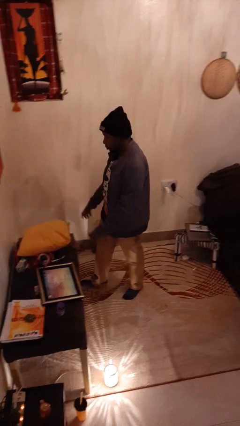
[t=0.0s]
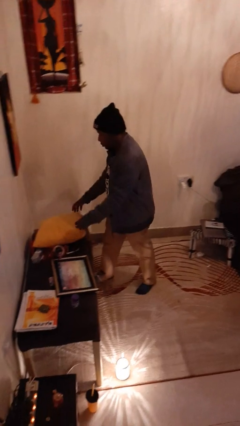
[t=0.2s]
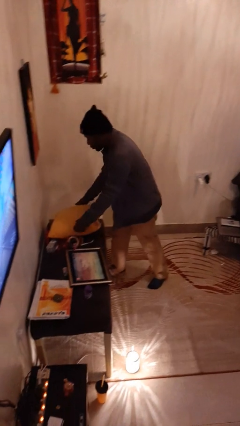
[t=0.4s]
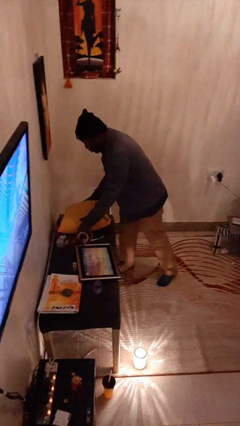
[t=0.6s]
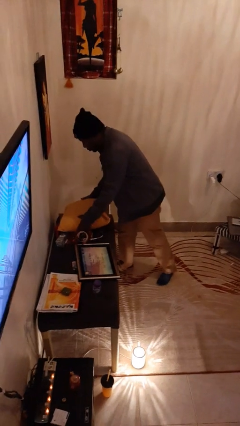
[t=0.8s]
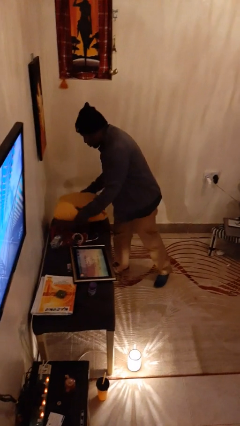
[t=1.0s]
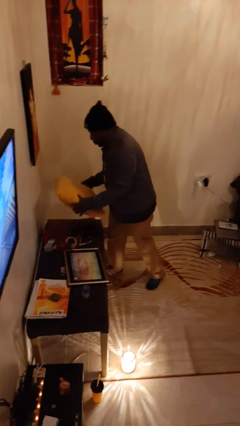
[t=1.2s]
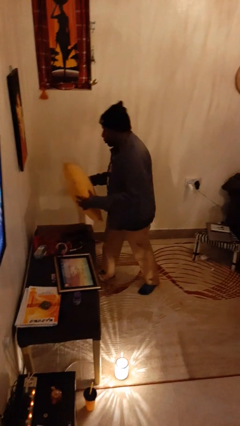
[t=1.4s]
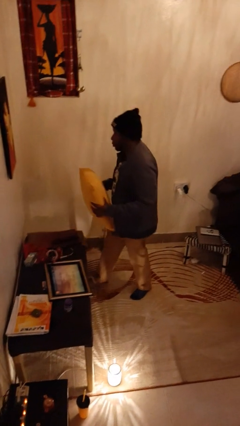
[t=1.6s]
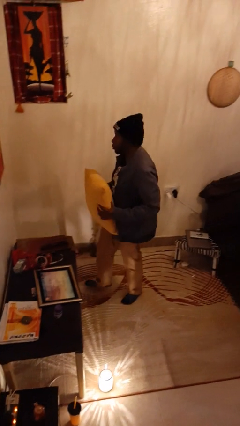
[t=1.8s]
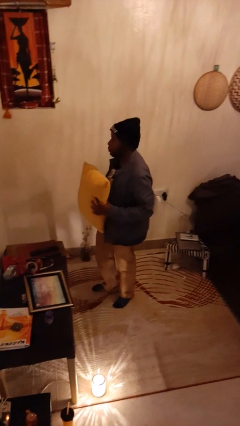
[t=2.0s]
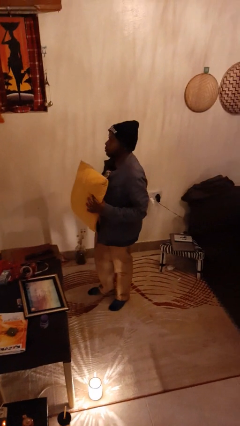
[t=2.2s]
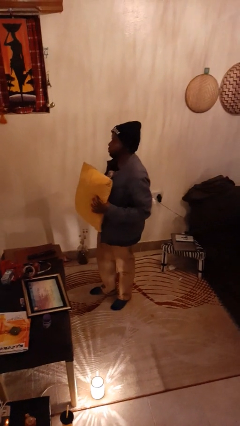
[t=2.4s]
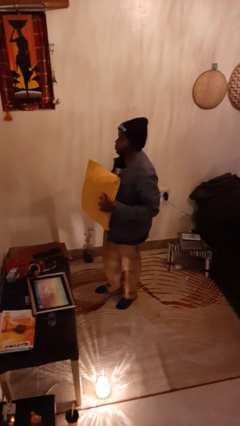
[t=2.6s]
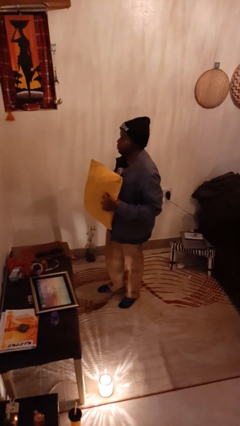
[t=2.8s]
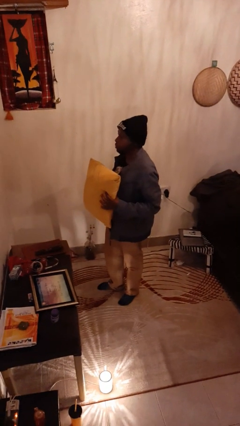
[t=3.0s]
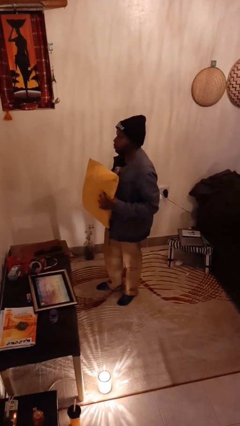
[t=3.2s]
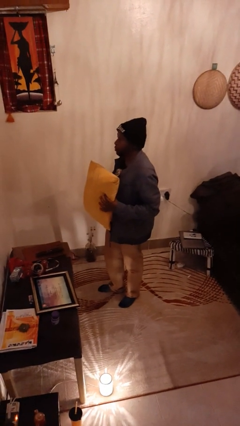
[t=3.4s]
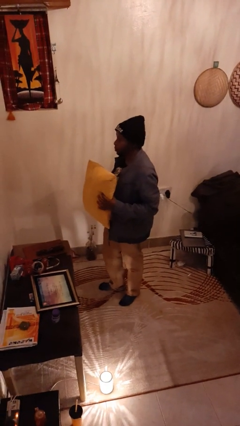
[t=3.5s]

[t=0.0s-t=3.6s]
person picks up object from countertop

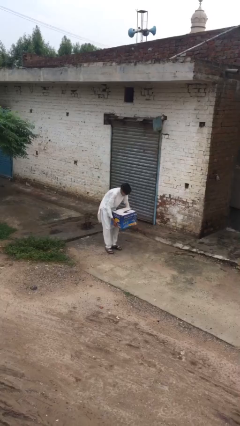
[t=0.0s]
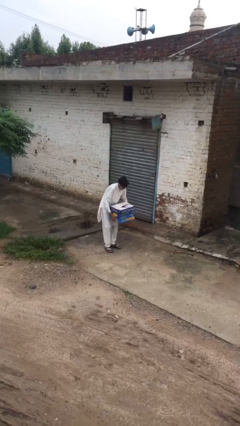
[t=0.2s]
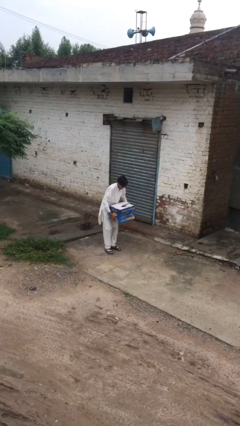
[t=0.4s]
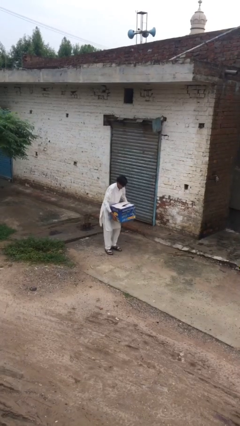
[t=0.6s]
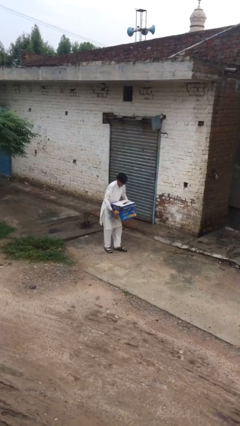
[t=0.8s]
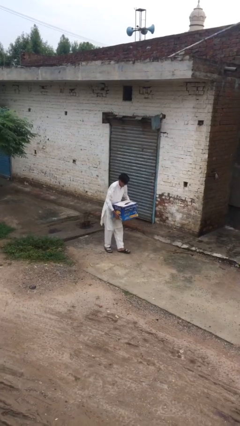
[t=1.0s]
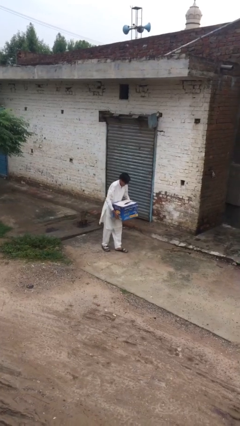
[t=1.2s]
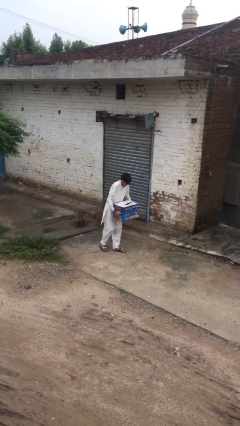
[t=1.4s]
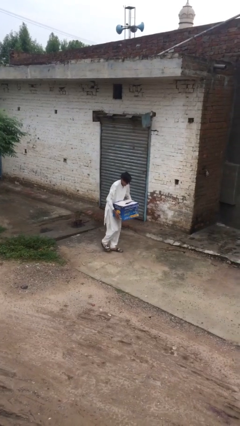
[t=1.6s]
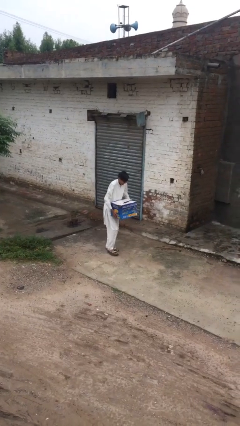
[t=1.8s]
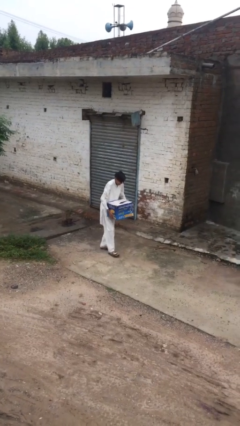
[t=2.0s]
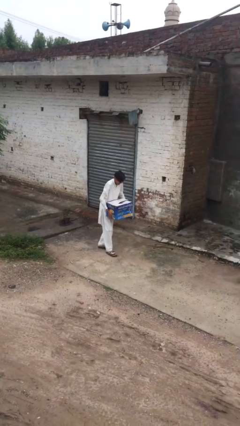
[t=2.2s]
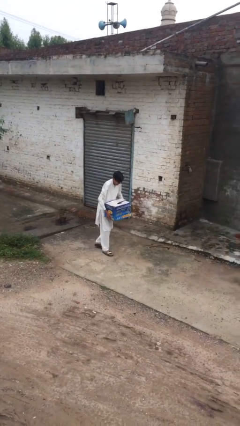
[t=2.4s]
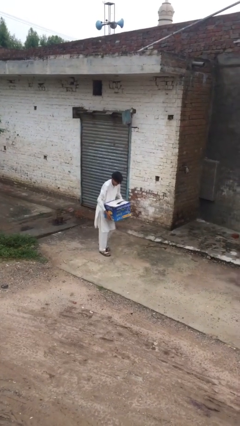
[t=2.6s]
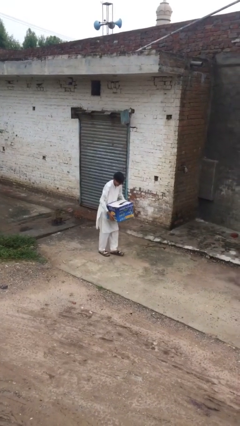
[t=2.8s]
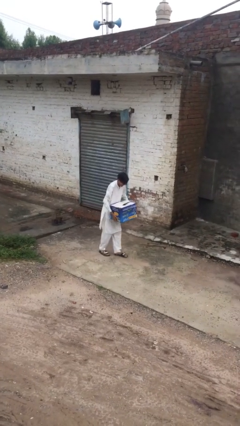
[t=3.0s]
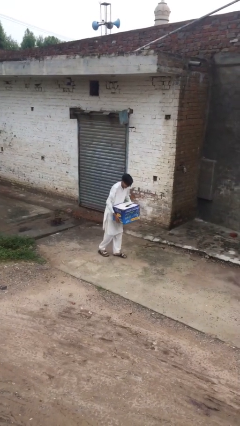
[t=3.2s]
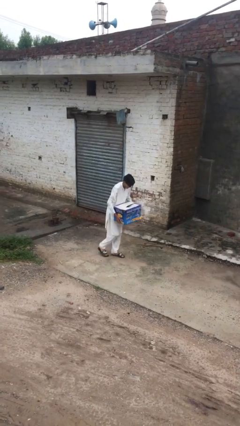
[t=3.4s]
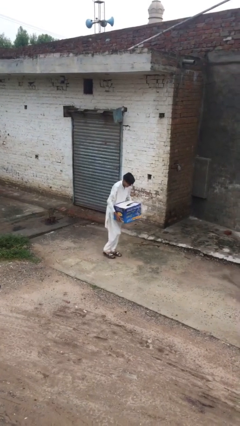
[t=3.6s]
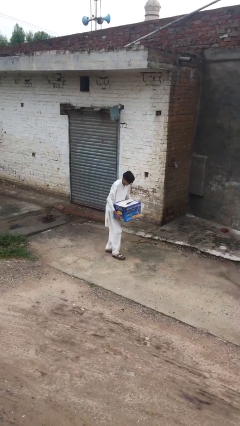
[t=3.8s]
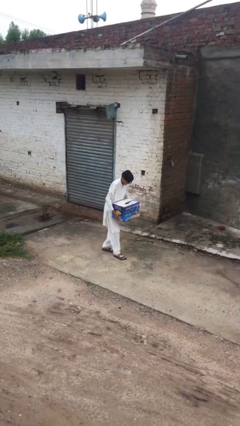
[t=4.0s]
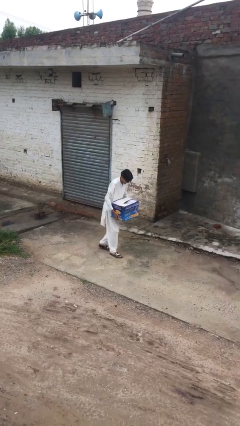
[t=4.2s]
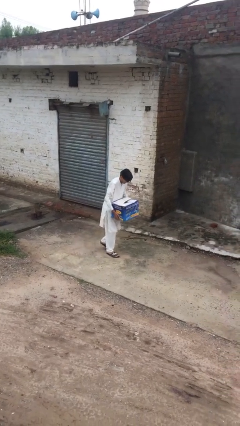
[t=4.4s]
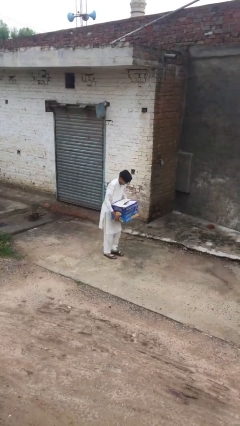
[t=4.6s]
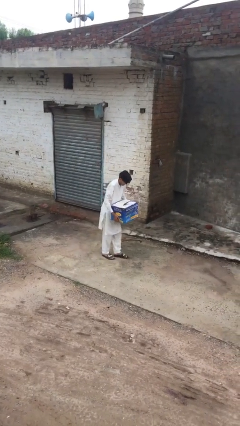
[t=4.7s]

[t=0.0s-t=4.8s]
person carries heavy object

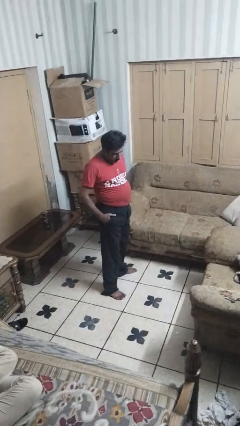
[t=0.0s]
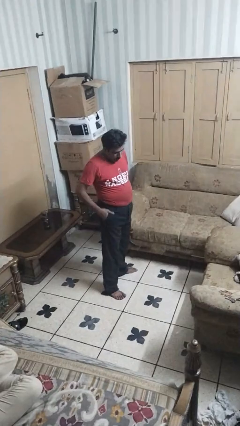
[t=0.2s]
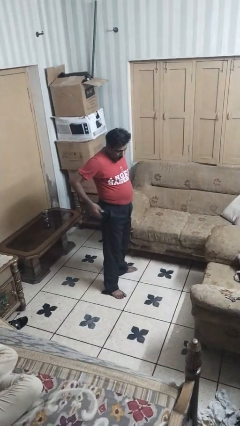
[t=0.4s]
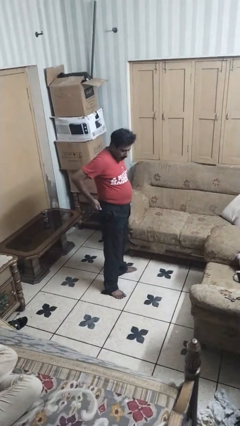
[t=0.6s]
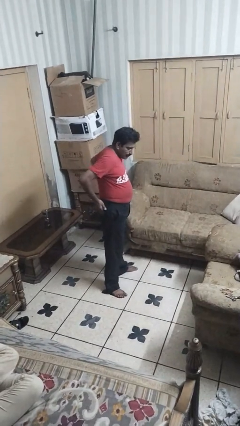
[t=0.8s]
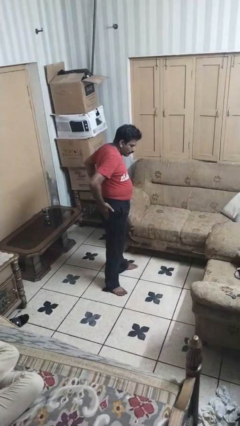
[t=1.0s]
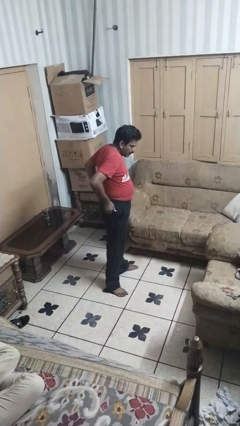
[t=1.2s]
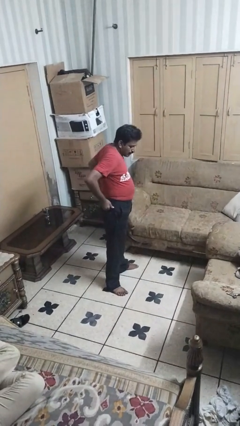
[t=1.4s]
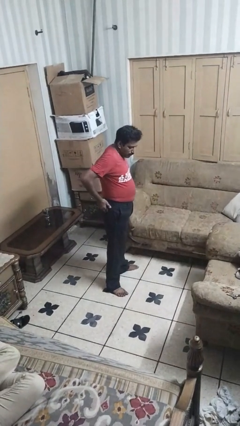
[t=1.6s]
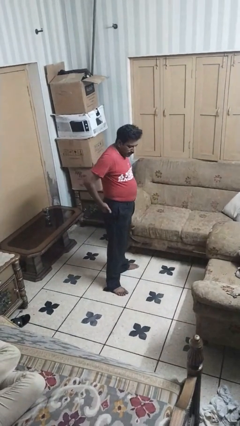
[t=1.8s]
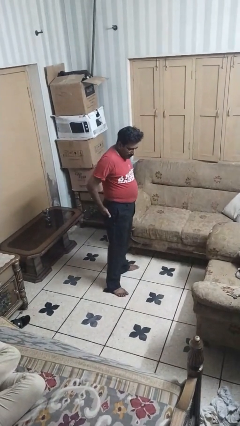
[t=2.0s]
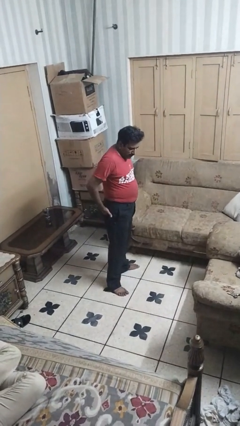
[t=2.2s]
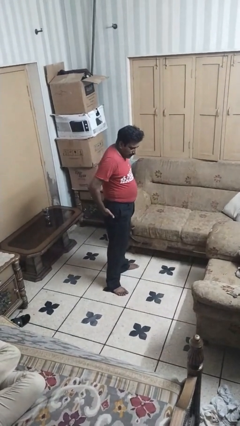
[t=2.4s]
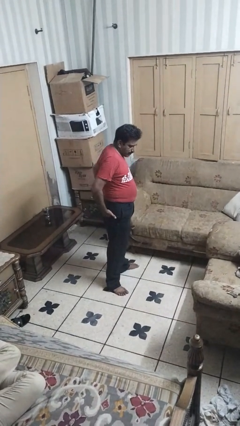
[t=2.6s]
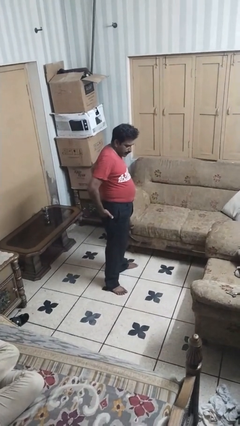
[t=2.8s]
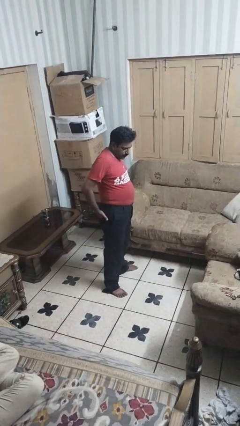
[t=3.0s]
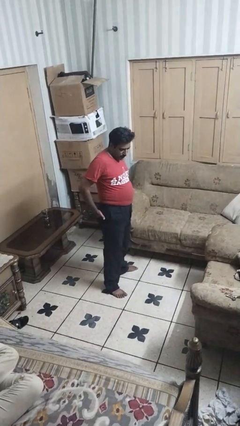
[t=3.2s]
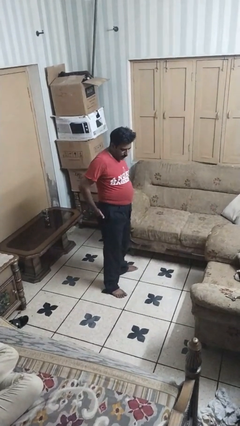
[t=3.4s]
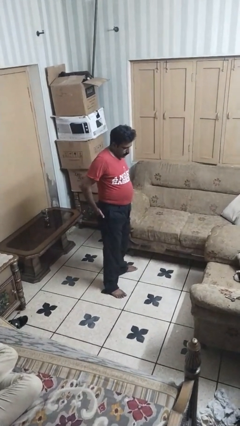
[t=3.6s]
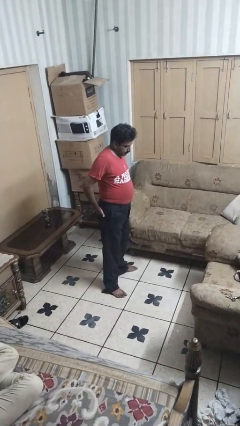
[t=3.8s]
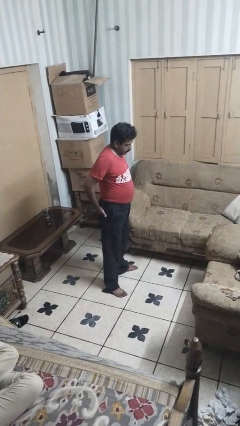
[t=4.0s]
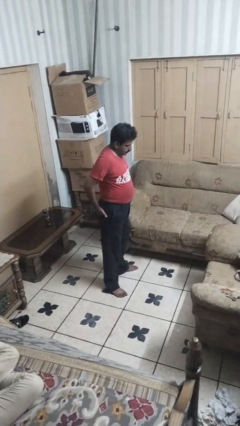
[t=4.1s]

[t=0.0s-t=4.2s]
person puts hands in back pockets

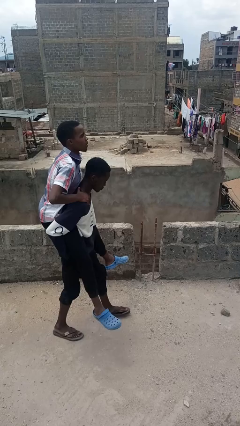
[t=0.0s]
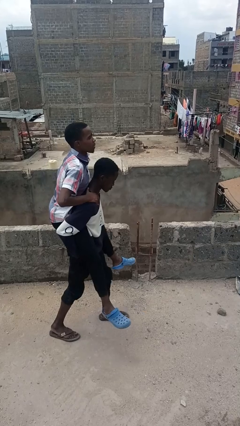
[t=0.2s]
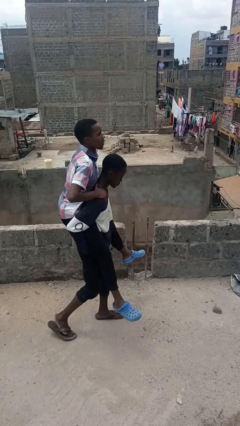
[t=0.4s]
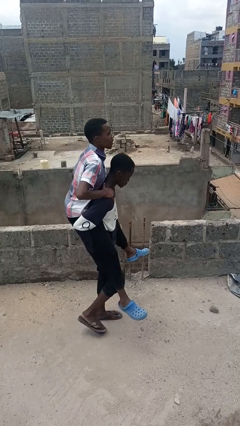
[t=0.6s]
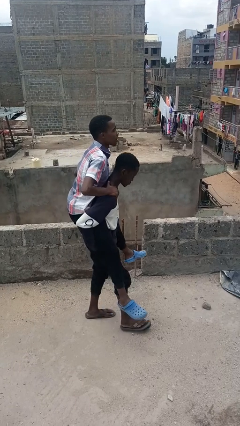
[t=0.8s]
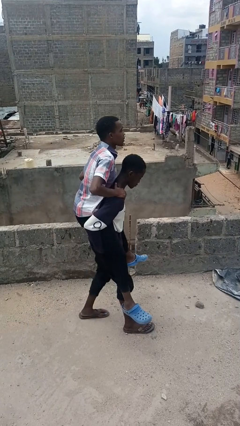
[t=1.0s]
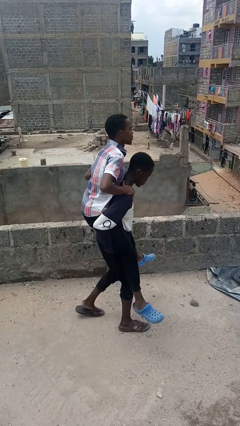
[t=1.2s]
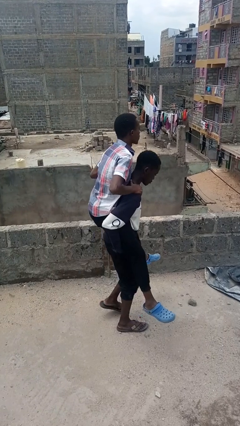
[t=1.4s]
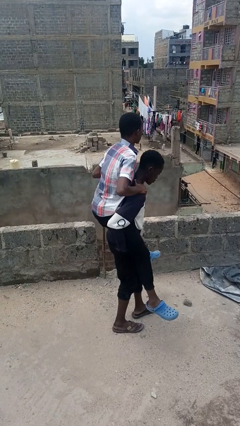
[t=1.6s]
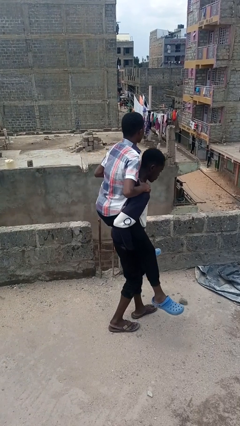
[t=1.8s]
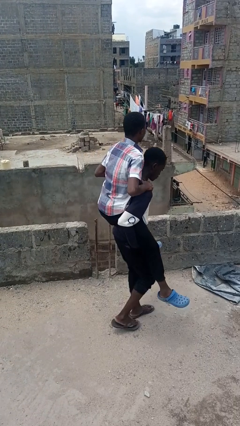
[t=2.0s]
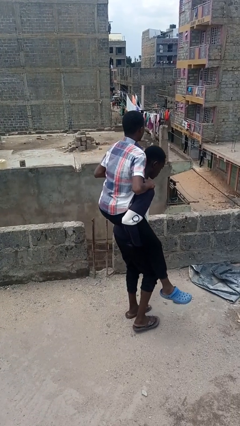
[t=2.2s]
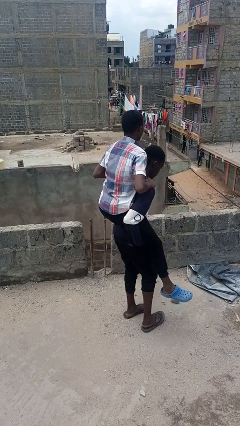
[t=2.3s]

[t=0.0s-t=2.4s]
person carries person on back

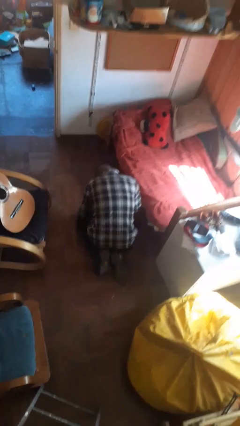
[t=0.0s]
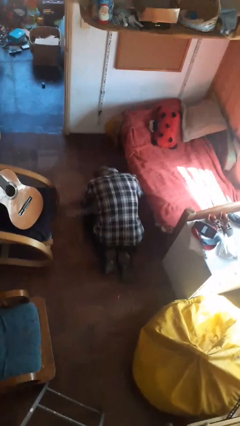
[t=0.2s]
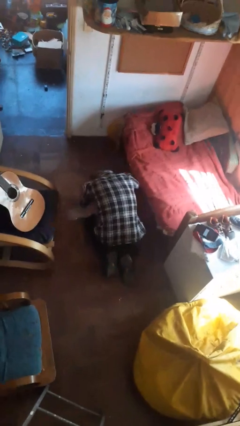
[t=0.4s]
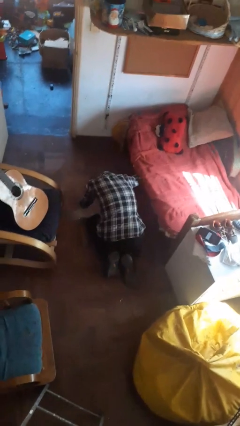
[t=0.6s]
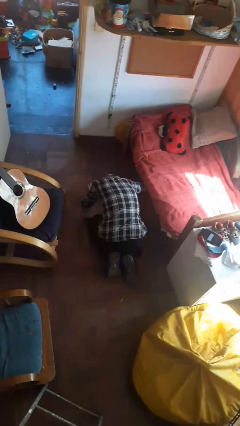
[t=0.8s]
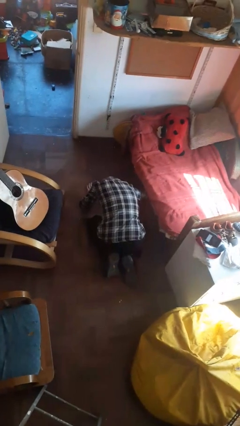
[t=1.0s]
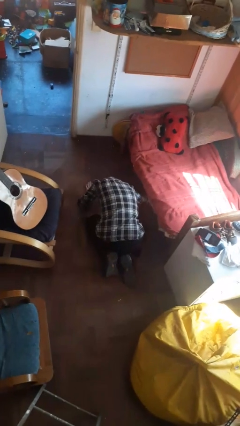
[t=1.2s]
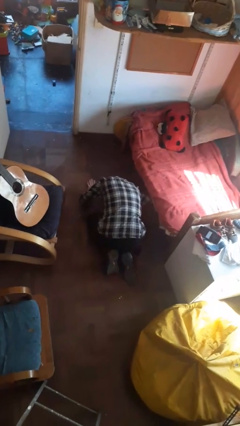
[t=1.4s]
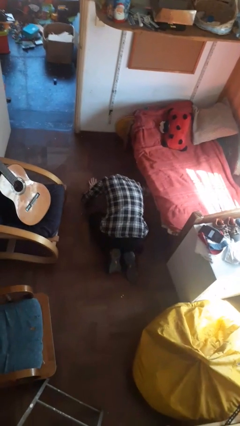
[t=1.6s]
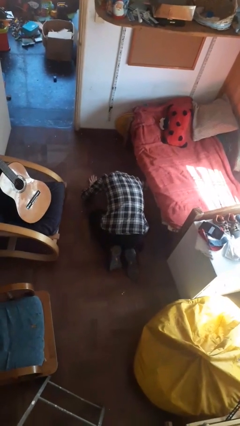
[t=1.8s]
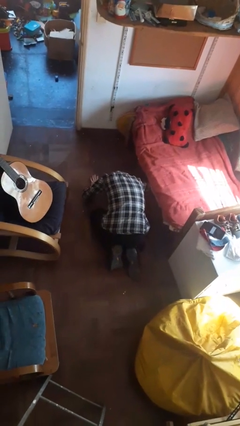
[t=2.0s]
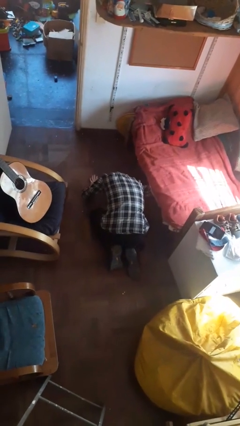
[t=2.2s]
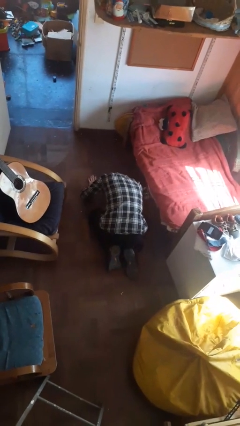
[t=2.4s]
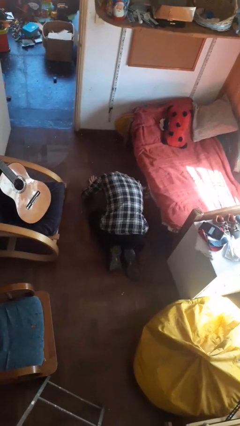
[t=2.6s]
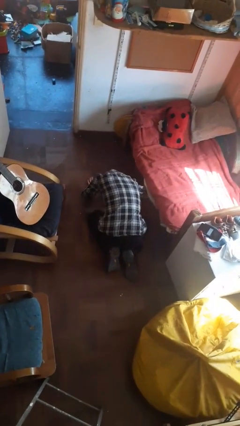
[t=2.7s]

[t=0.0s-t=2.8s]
person searches under bed
